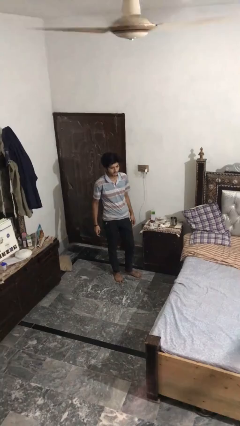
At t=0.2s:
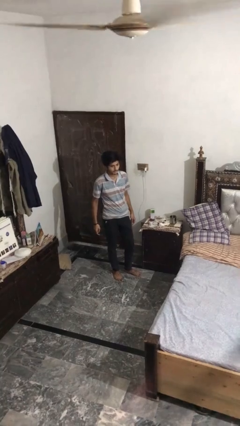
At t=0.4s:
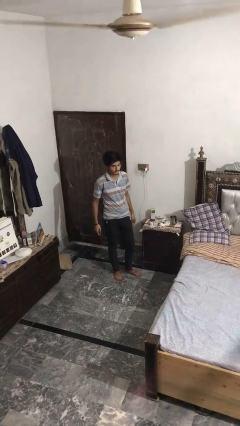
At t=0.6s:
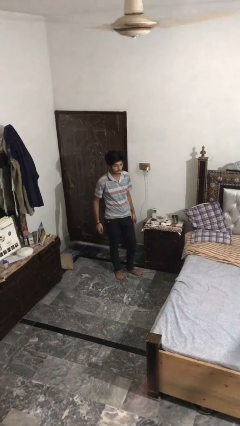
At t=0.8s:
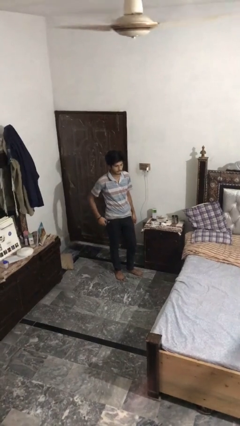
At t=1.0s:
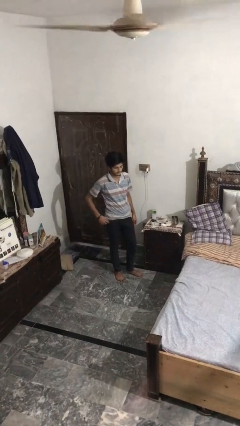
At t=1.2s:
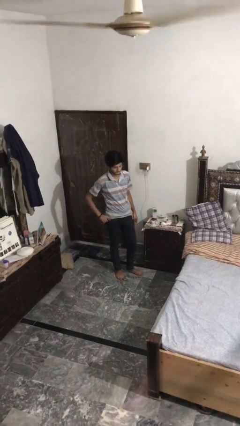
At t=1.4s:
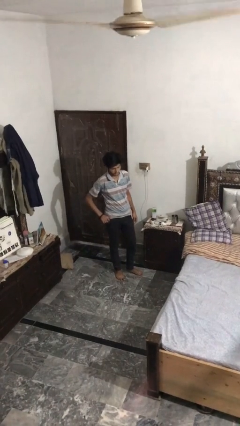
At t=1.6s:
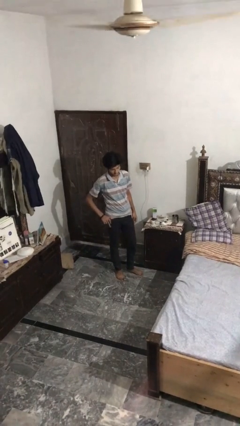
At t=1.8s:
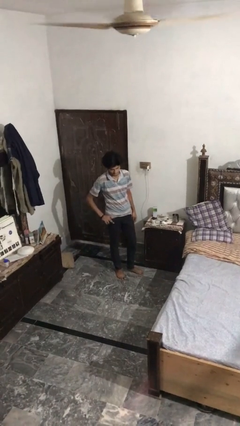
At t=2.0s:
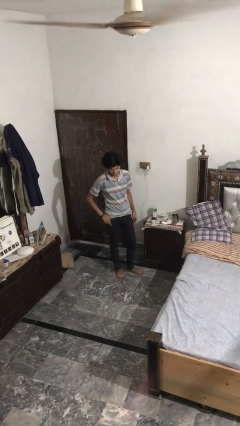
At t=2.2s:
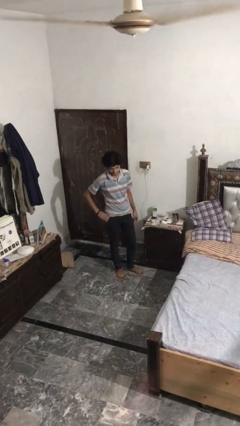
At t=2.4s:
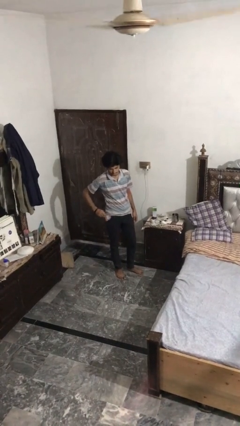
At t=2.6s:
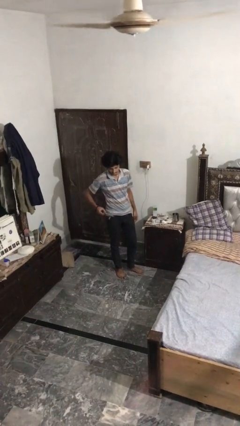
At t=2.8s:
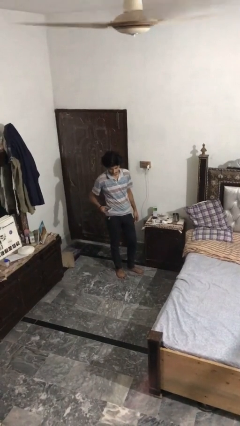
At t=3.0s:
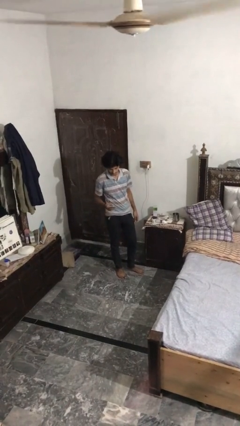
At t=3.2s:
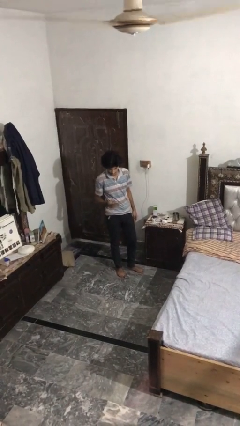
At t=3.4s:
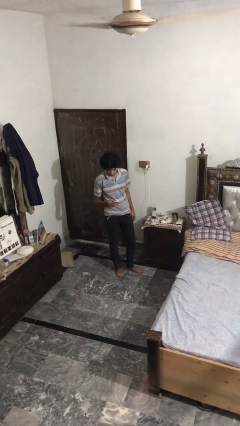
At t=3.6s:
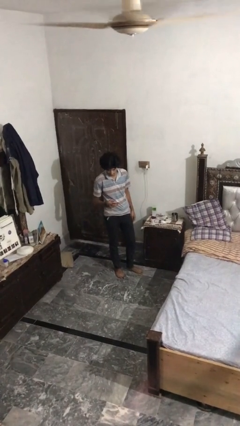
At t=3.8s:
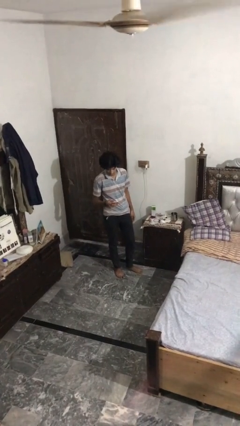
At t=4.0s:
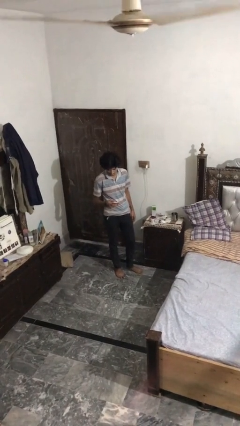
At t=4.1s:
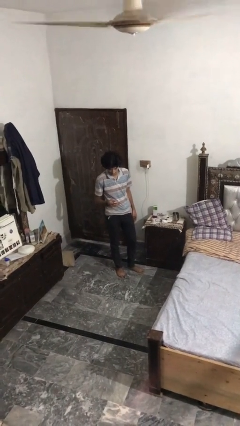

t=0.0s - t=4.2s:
person takes phone from pocket

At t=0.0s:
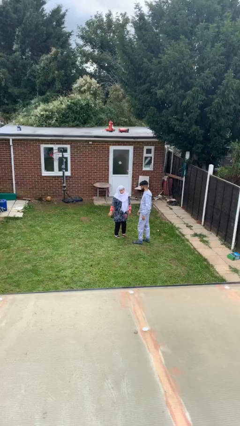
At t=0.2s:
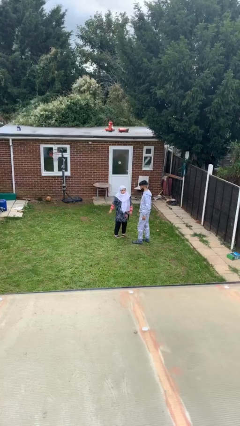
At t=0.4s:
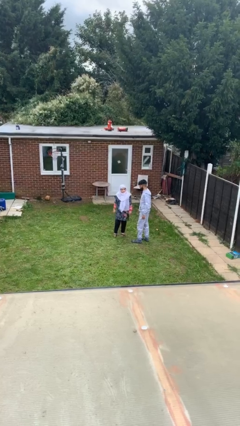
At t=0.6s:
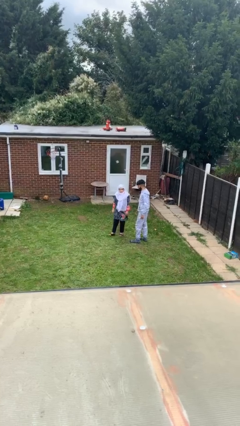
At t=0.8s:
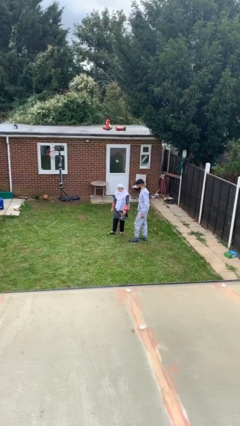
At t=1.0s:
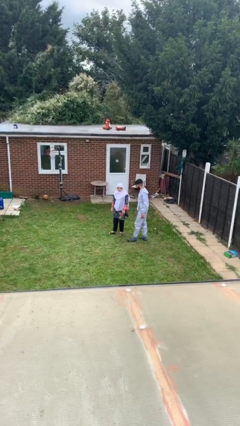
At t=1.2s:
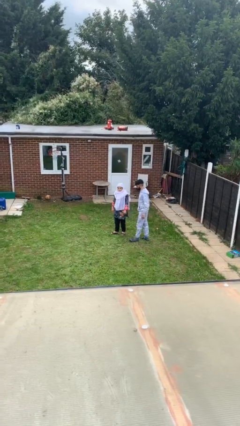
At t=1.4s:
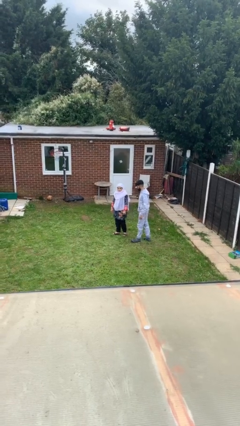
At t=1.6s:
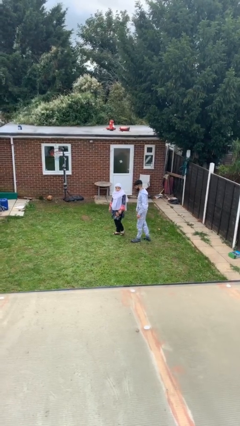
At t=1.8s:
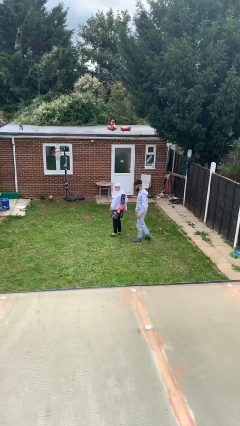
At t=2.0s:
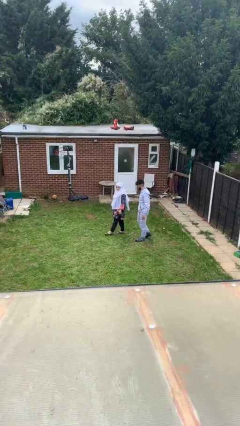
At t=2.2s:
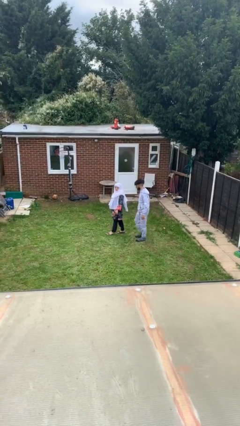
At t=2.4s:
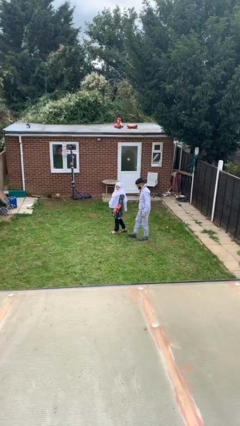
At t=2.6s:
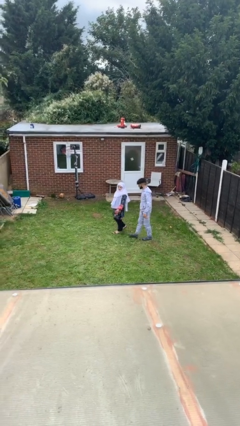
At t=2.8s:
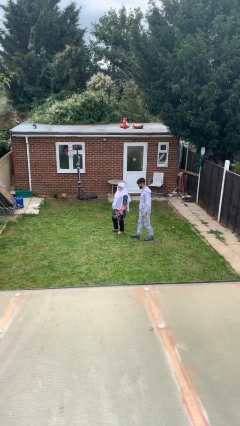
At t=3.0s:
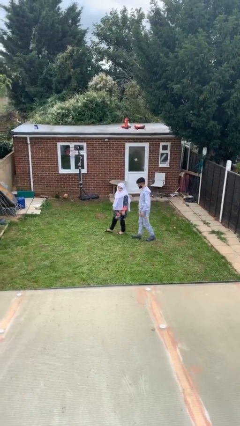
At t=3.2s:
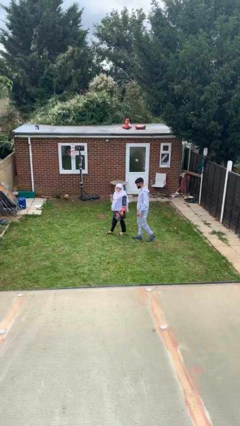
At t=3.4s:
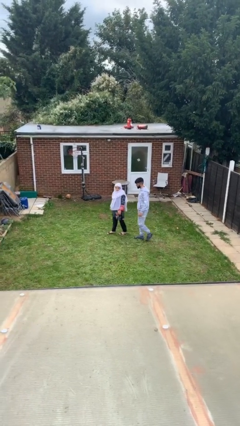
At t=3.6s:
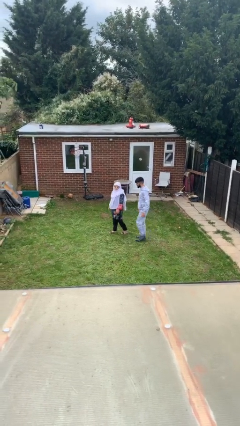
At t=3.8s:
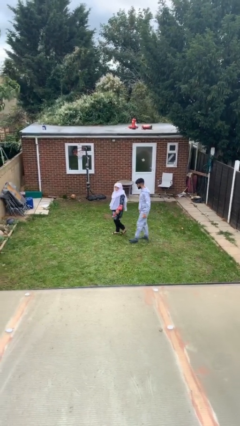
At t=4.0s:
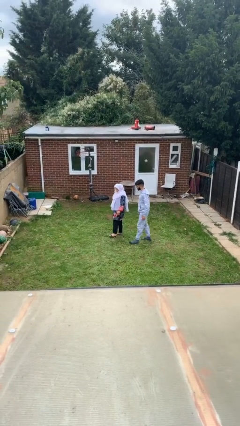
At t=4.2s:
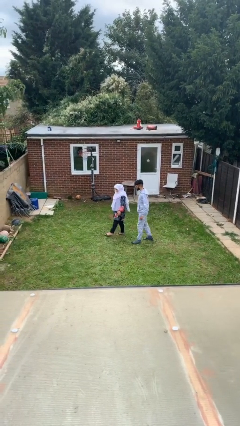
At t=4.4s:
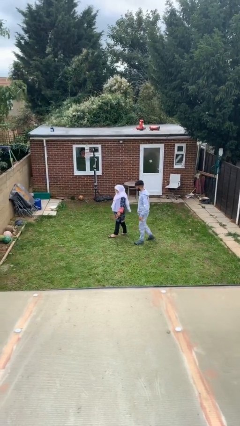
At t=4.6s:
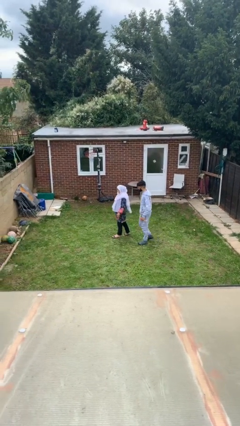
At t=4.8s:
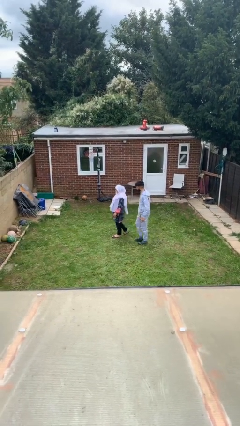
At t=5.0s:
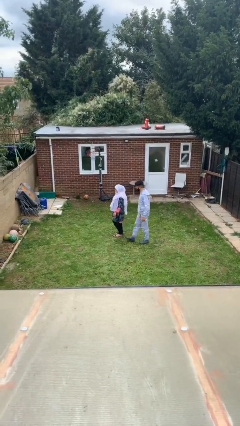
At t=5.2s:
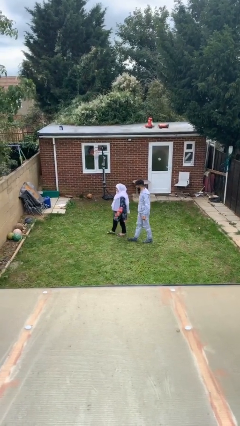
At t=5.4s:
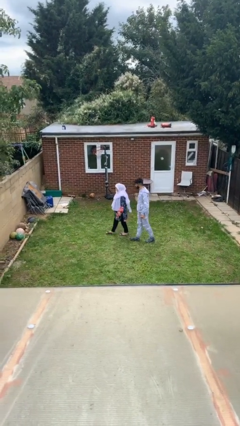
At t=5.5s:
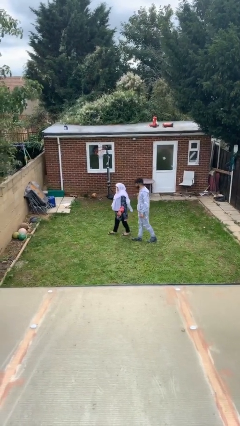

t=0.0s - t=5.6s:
person talks to person

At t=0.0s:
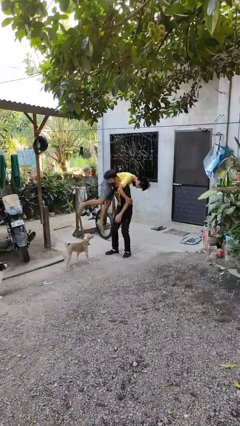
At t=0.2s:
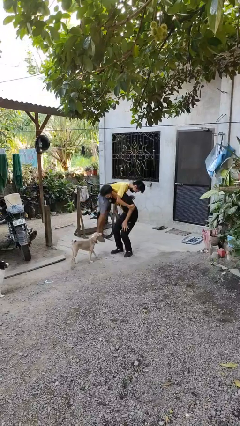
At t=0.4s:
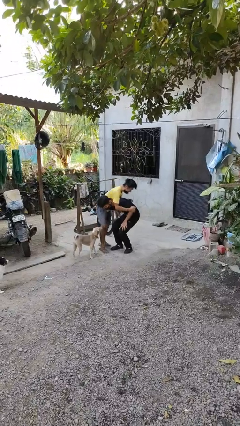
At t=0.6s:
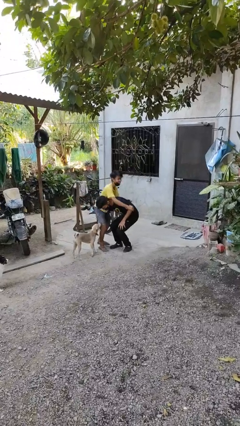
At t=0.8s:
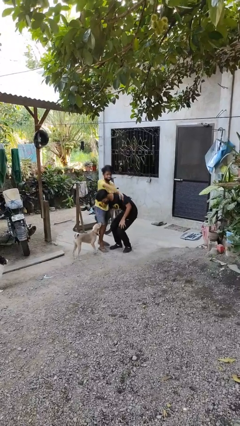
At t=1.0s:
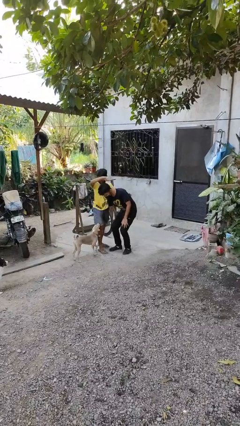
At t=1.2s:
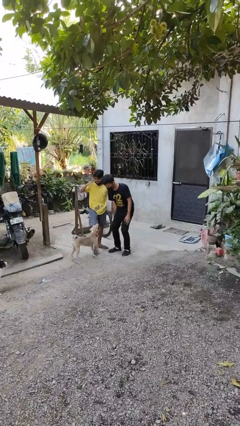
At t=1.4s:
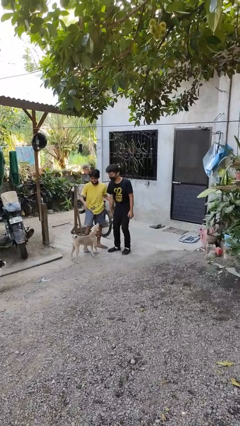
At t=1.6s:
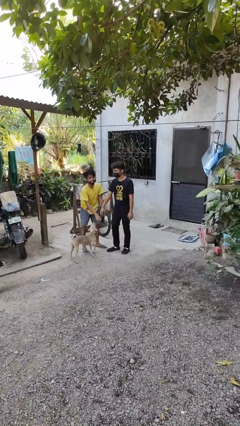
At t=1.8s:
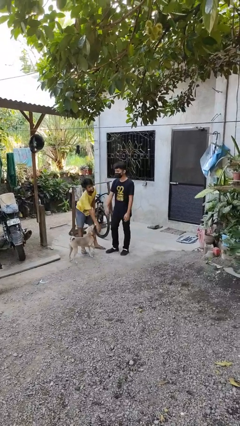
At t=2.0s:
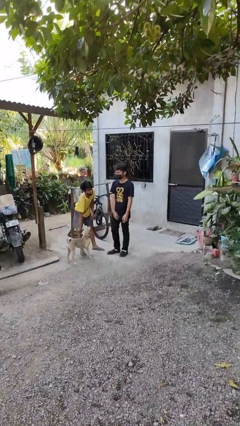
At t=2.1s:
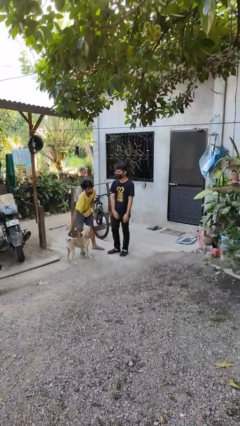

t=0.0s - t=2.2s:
person puts down person

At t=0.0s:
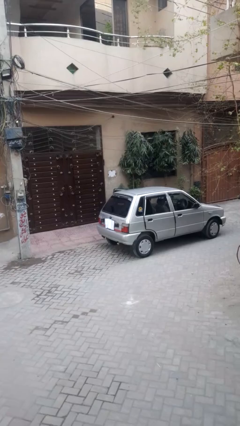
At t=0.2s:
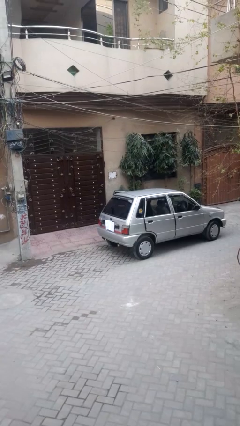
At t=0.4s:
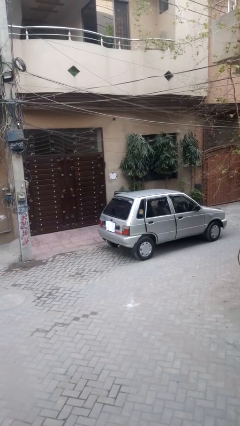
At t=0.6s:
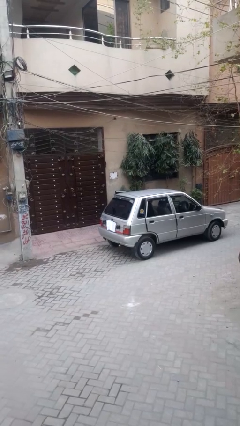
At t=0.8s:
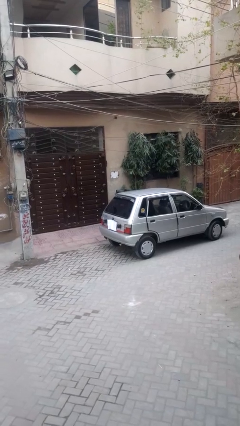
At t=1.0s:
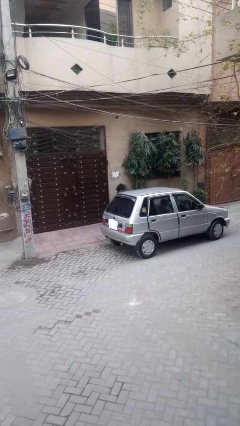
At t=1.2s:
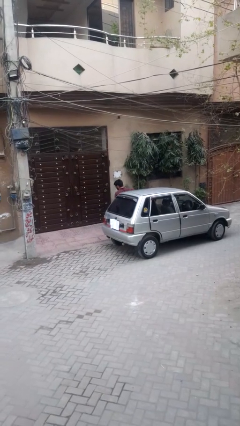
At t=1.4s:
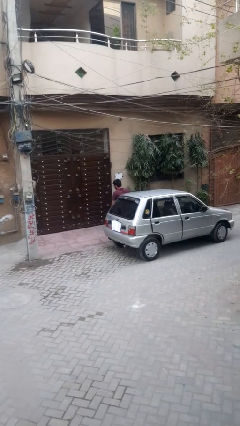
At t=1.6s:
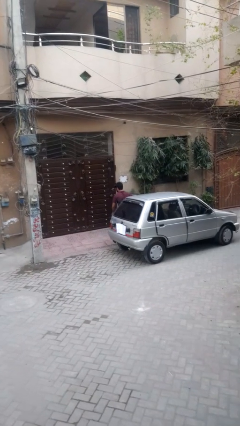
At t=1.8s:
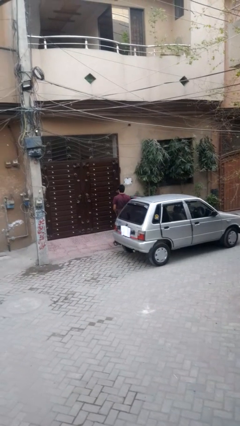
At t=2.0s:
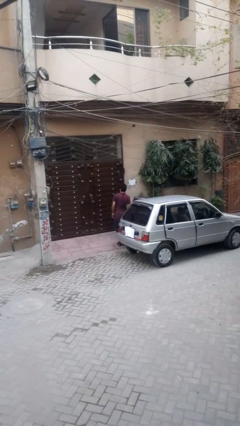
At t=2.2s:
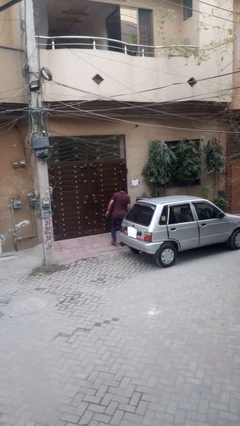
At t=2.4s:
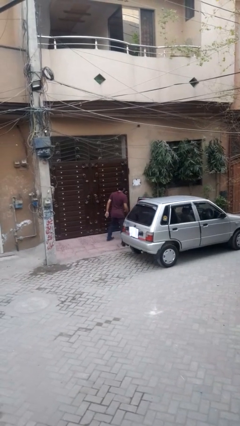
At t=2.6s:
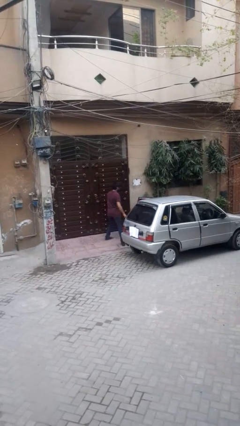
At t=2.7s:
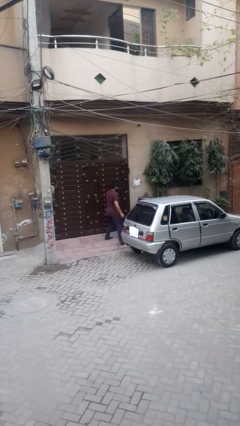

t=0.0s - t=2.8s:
person exits car

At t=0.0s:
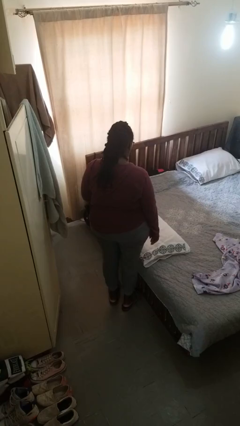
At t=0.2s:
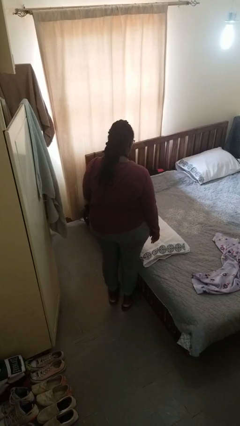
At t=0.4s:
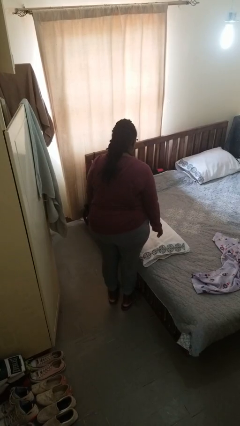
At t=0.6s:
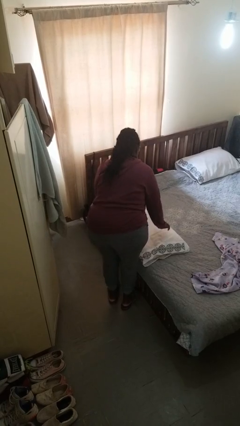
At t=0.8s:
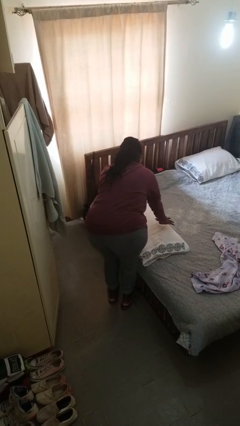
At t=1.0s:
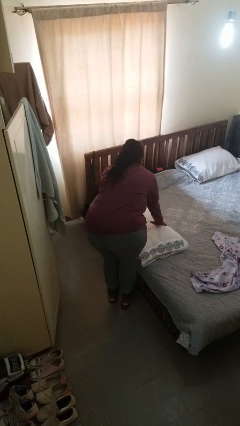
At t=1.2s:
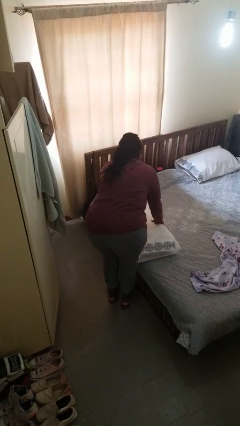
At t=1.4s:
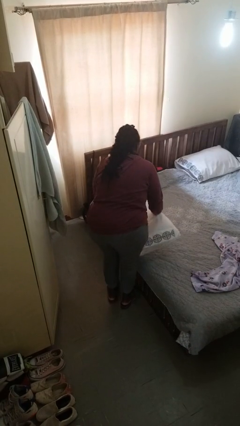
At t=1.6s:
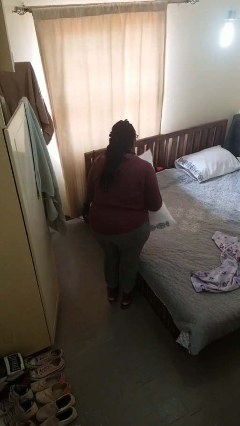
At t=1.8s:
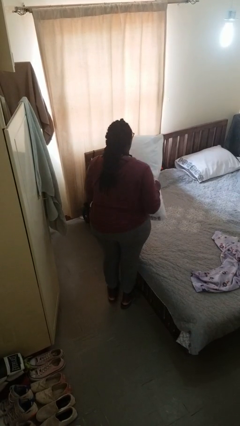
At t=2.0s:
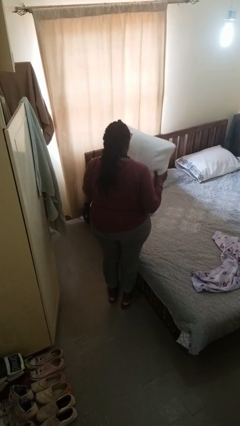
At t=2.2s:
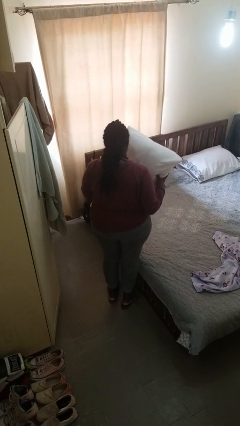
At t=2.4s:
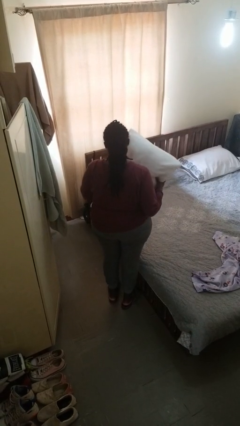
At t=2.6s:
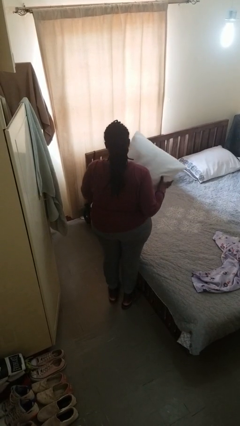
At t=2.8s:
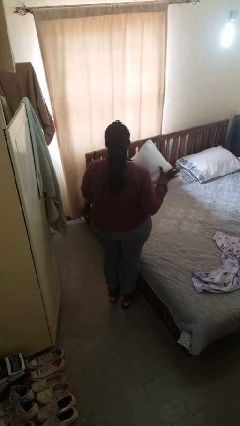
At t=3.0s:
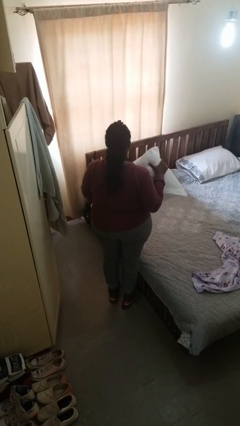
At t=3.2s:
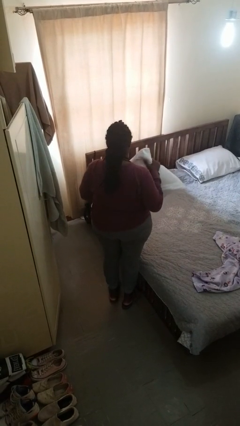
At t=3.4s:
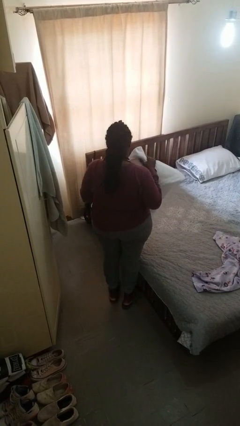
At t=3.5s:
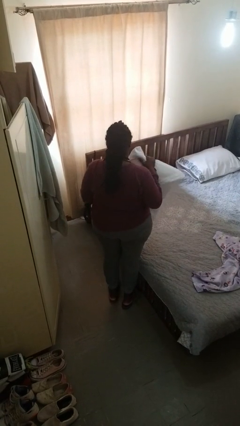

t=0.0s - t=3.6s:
person picks up object from bed
